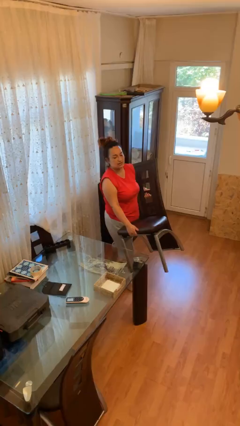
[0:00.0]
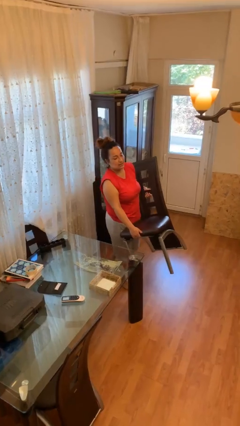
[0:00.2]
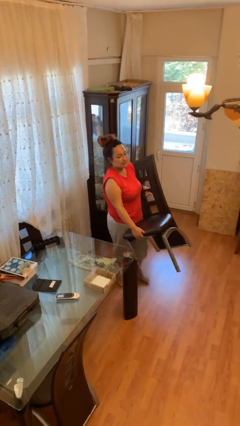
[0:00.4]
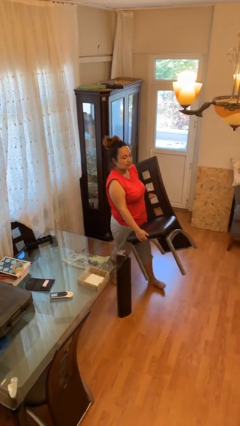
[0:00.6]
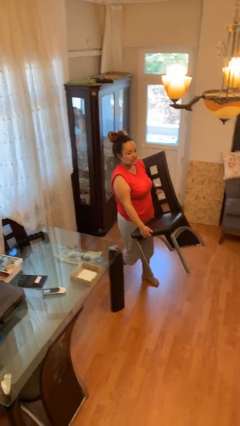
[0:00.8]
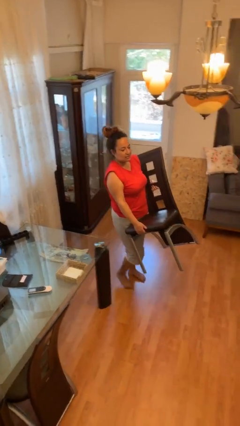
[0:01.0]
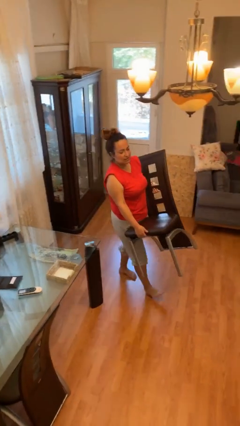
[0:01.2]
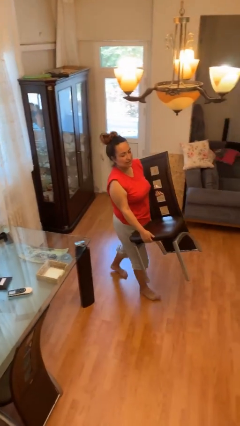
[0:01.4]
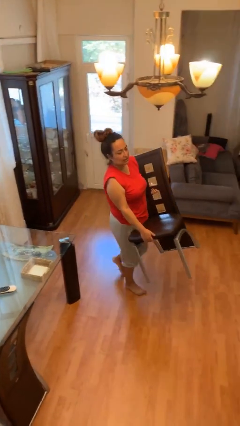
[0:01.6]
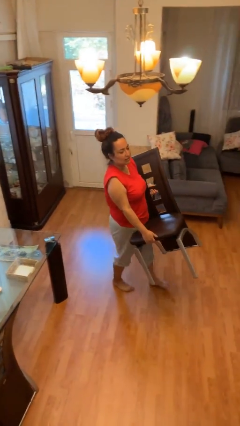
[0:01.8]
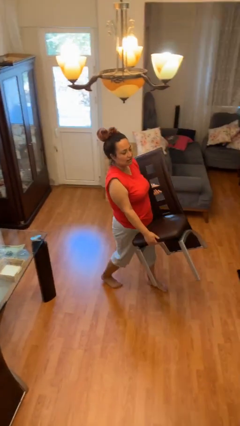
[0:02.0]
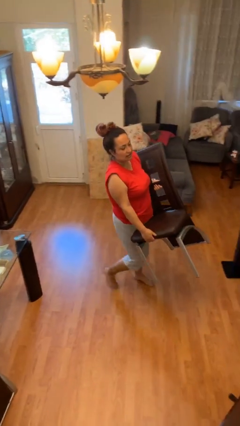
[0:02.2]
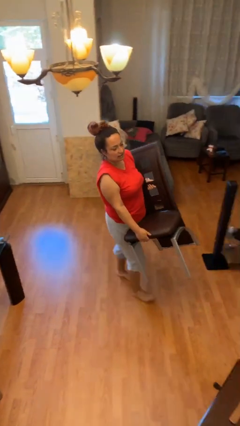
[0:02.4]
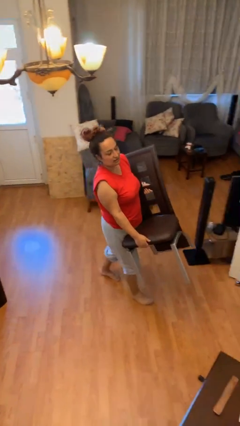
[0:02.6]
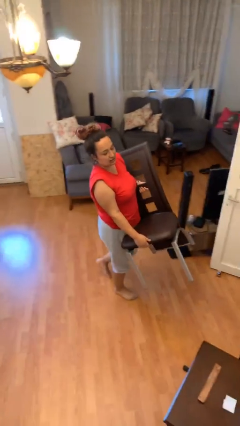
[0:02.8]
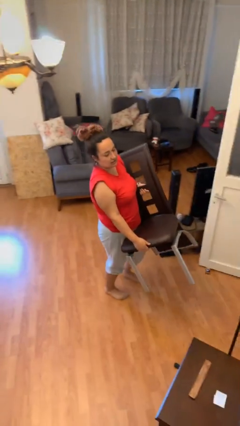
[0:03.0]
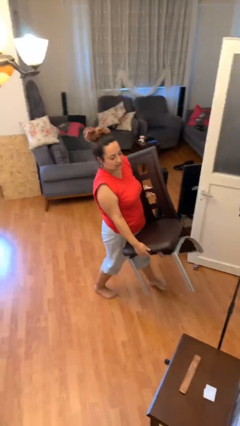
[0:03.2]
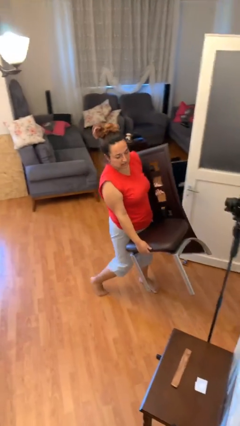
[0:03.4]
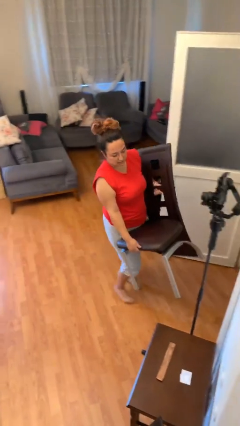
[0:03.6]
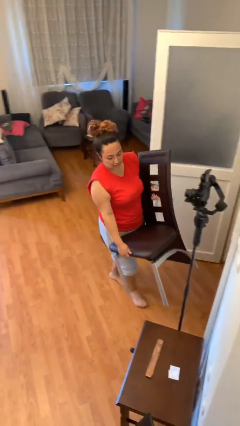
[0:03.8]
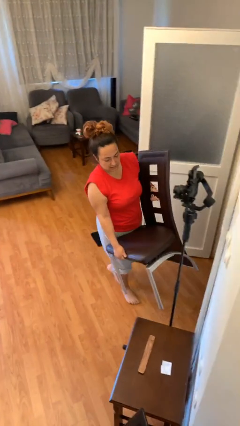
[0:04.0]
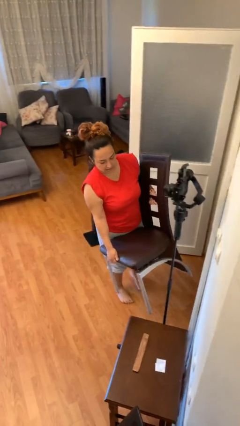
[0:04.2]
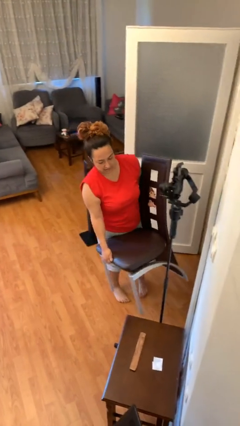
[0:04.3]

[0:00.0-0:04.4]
person carries heavy object

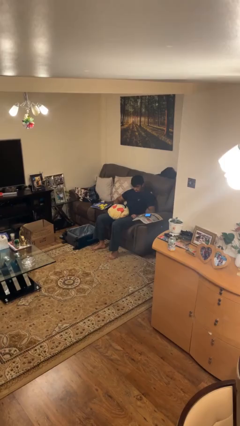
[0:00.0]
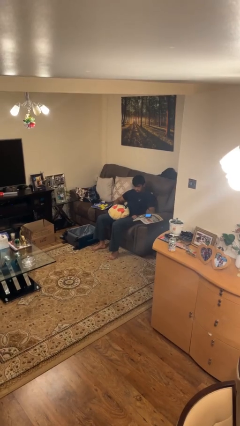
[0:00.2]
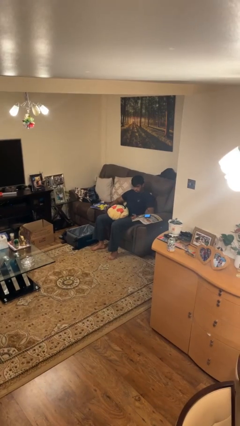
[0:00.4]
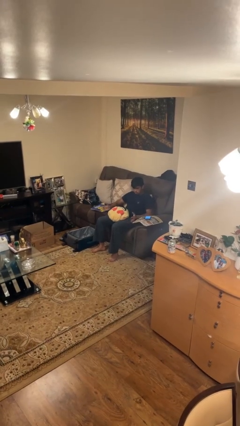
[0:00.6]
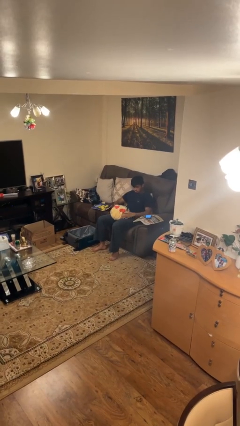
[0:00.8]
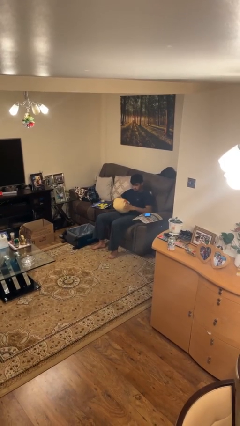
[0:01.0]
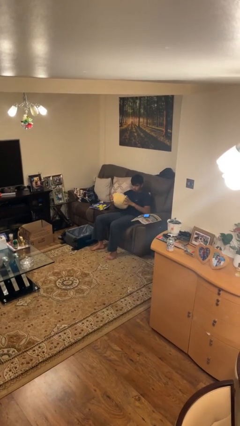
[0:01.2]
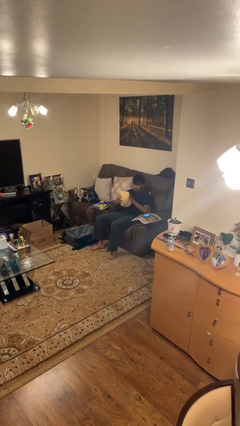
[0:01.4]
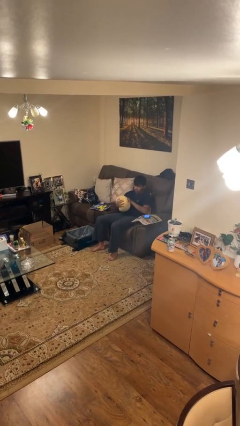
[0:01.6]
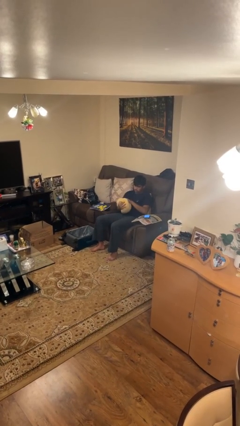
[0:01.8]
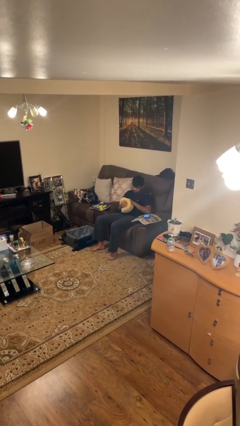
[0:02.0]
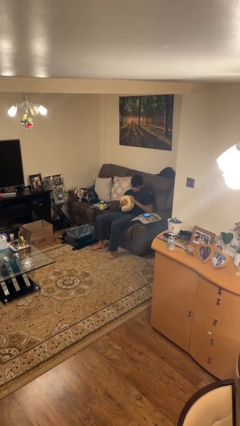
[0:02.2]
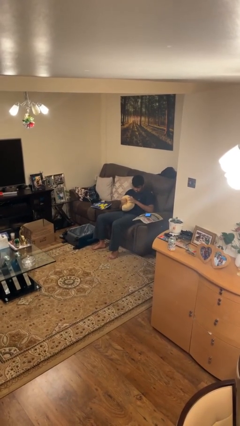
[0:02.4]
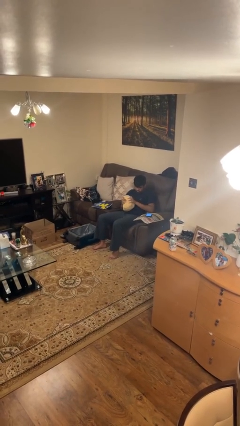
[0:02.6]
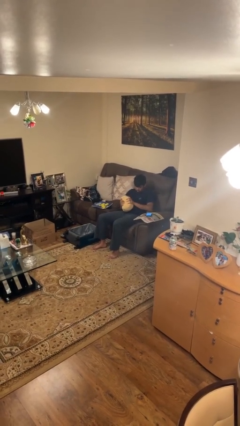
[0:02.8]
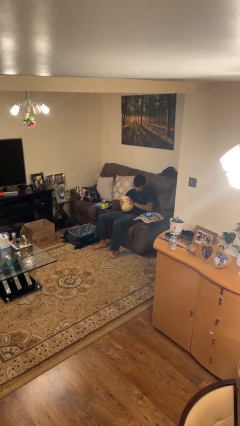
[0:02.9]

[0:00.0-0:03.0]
person squeezes object

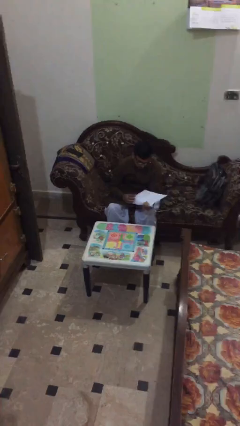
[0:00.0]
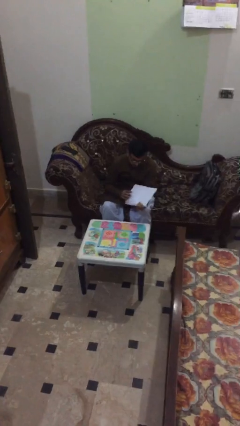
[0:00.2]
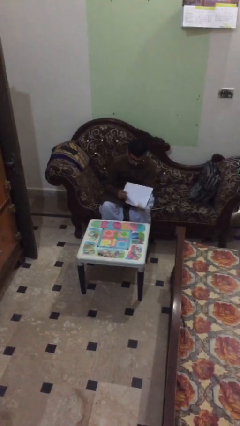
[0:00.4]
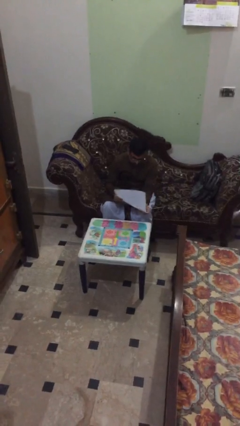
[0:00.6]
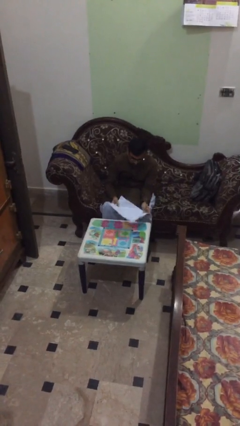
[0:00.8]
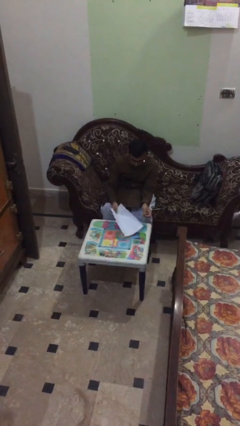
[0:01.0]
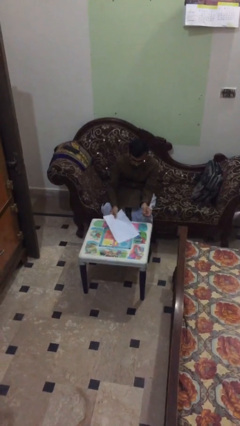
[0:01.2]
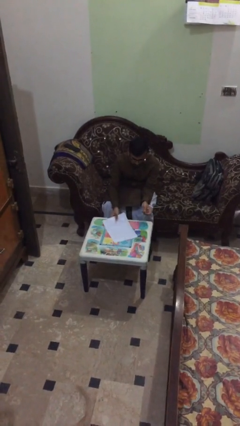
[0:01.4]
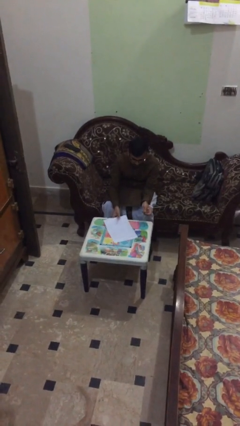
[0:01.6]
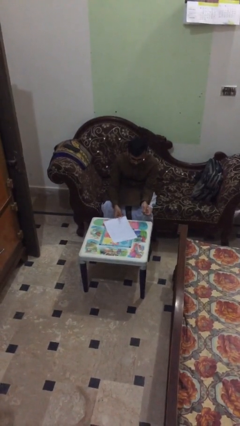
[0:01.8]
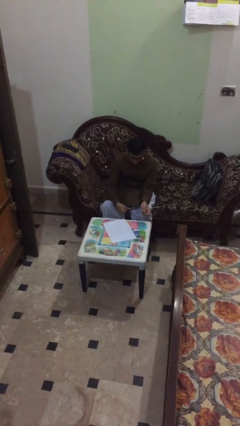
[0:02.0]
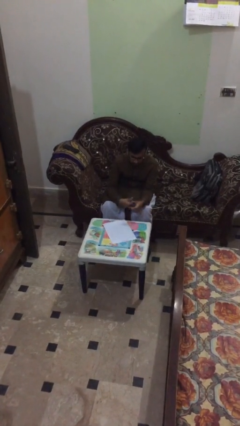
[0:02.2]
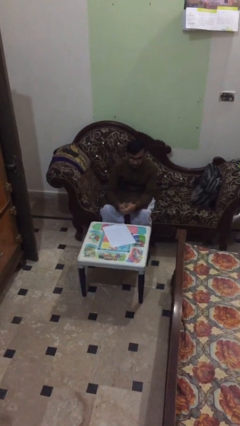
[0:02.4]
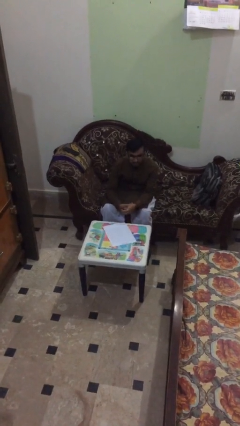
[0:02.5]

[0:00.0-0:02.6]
person puts down object on table

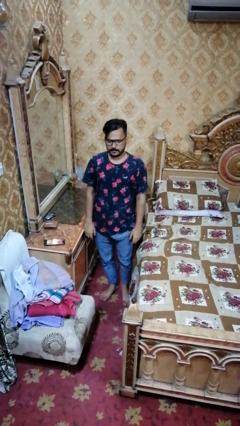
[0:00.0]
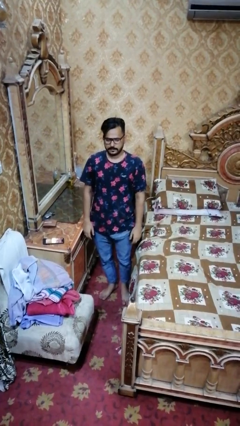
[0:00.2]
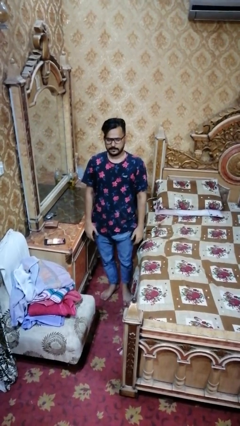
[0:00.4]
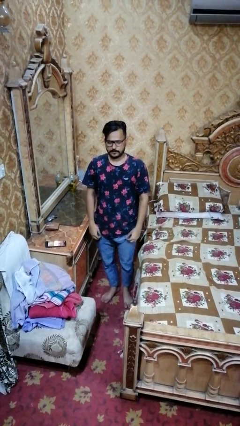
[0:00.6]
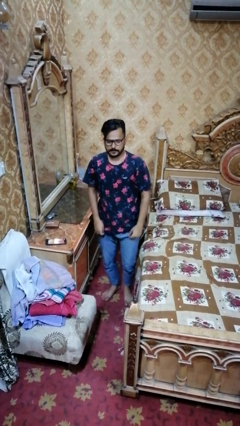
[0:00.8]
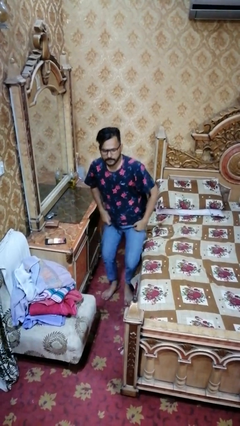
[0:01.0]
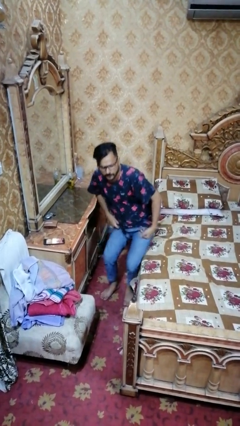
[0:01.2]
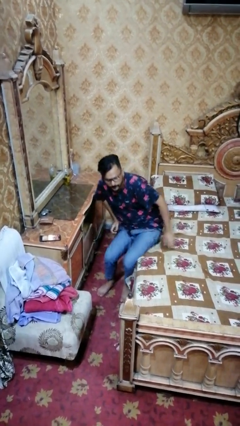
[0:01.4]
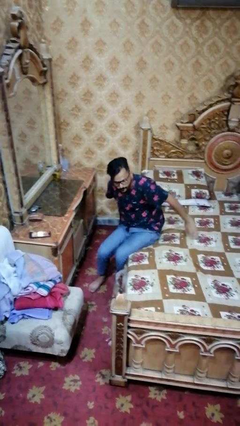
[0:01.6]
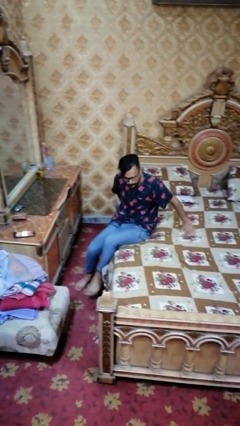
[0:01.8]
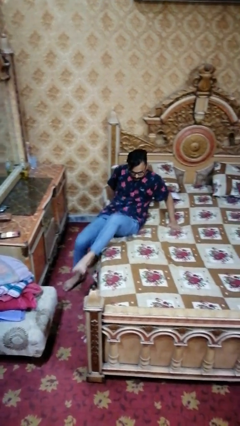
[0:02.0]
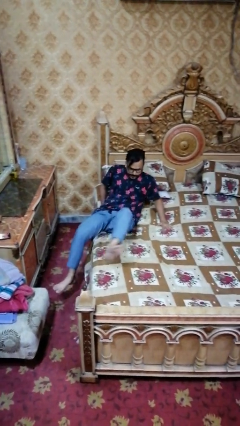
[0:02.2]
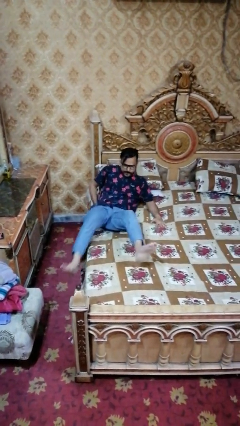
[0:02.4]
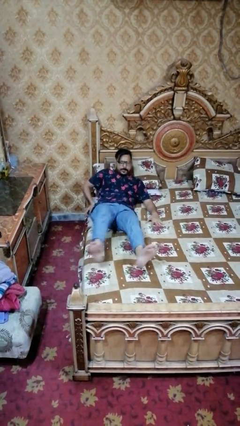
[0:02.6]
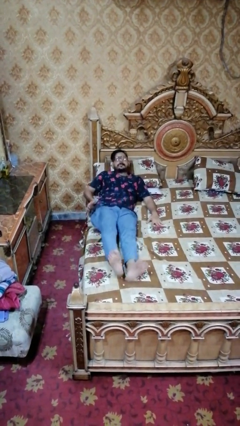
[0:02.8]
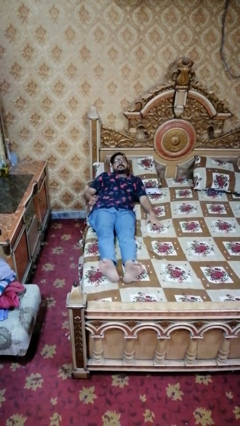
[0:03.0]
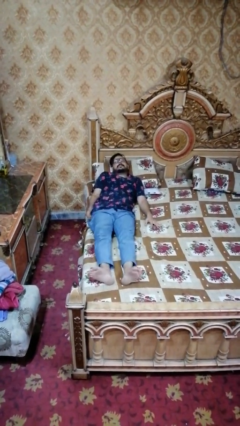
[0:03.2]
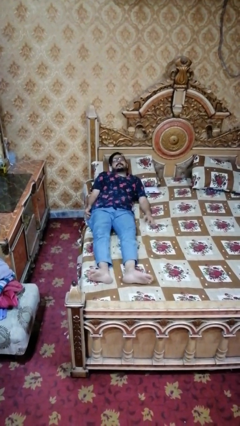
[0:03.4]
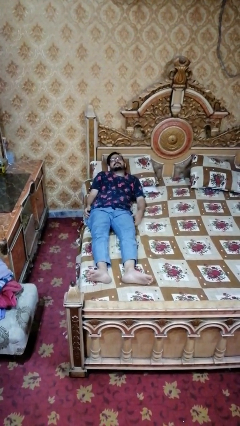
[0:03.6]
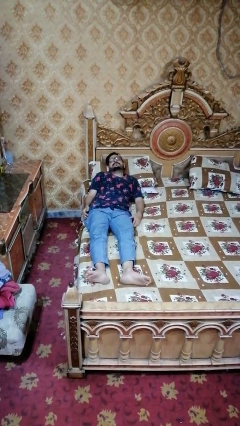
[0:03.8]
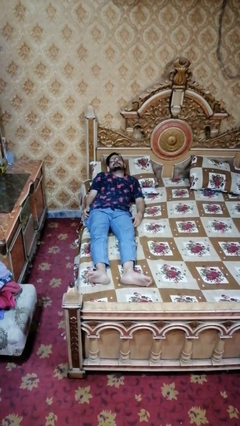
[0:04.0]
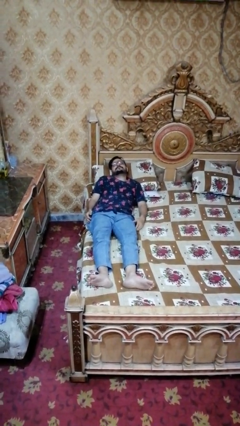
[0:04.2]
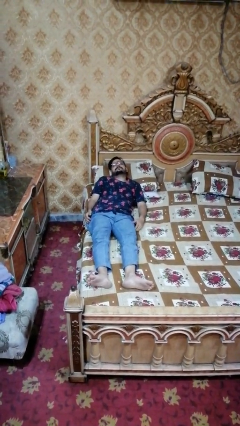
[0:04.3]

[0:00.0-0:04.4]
person lies down on bed

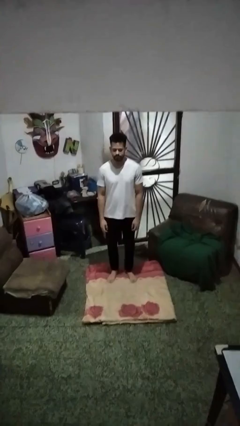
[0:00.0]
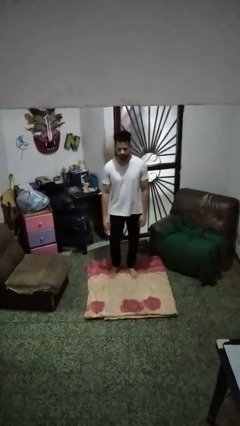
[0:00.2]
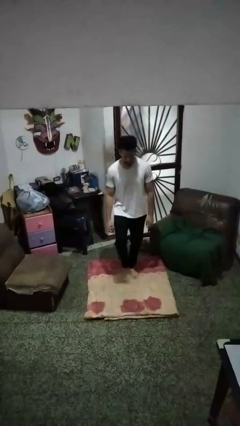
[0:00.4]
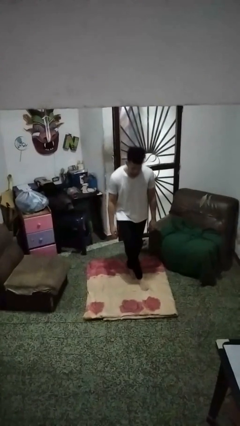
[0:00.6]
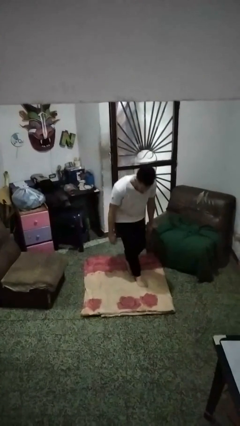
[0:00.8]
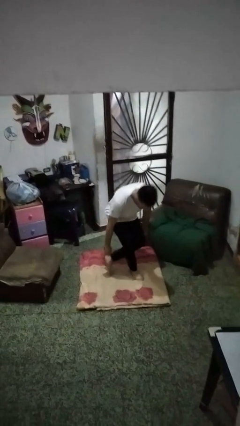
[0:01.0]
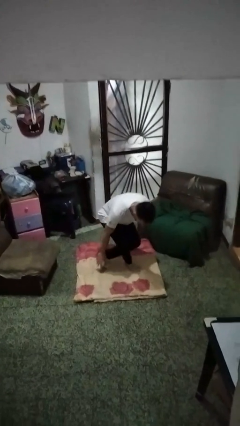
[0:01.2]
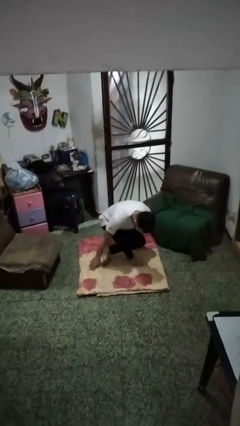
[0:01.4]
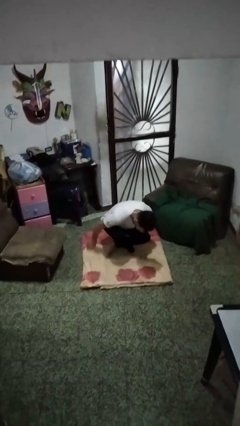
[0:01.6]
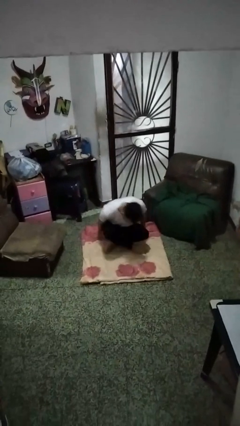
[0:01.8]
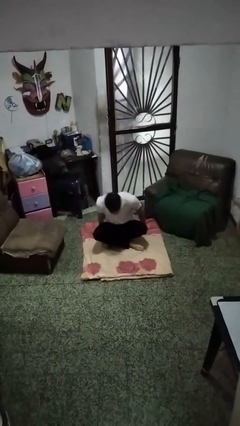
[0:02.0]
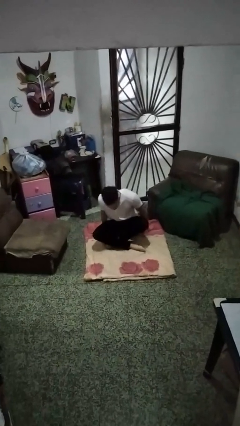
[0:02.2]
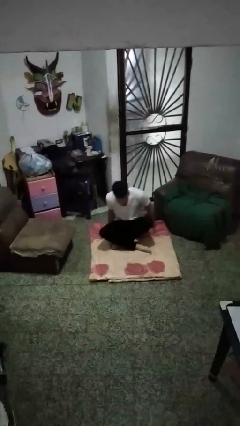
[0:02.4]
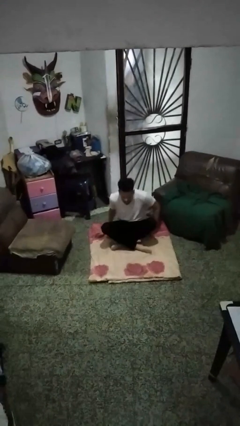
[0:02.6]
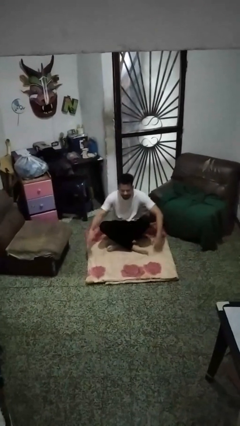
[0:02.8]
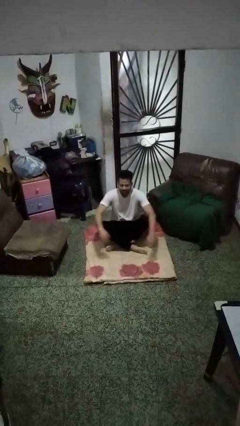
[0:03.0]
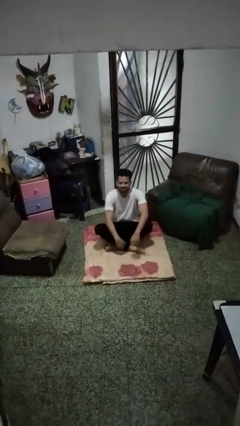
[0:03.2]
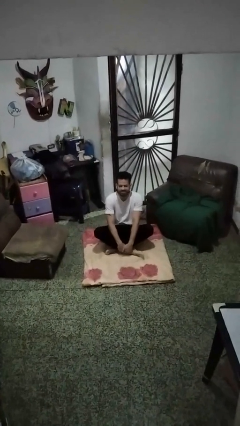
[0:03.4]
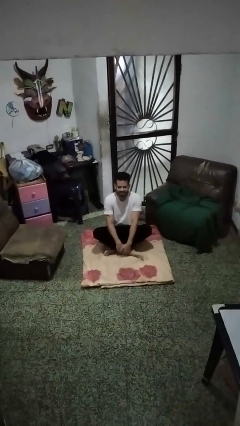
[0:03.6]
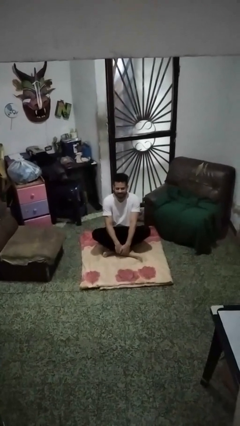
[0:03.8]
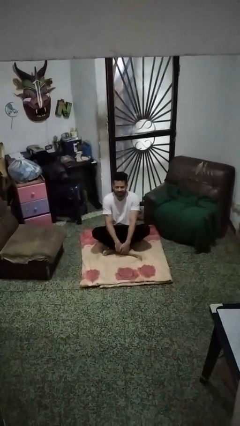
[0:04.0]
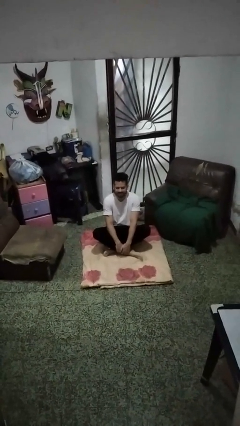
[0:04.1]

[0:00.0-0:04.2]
person sits crisscross
